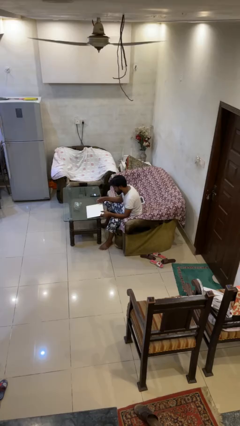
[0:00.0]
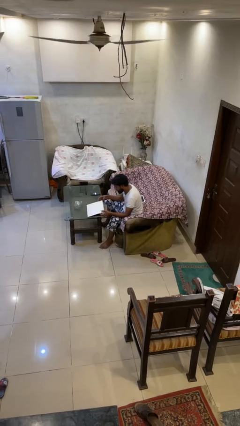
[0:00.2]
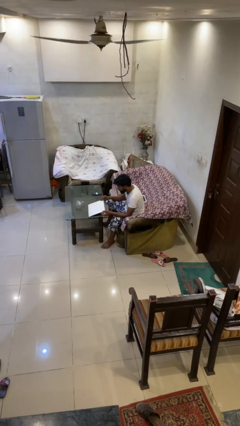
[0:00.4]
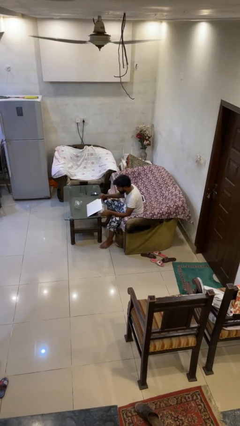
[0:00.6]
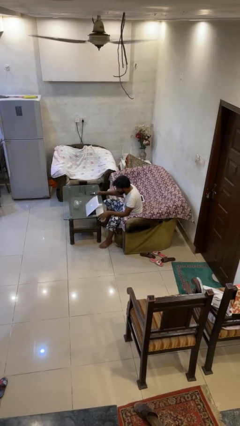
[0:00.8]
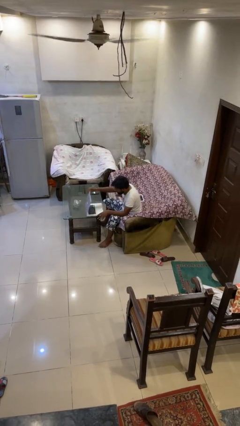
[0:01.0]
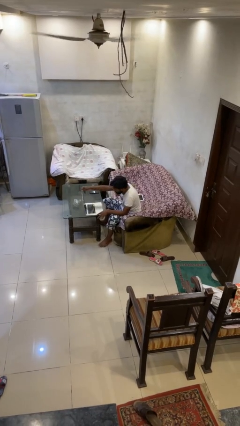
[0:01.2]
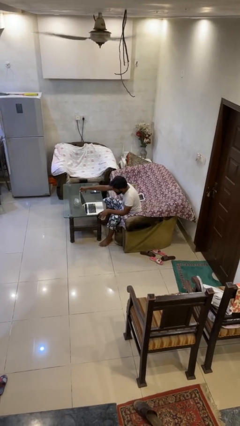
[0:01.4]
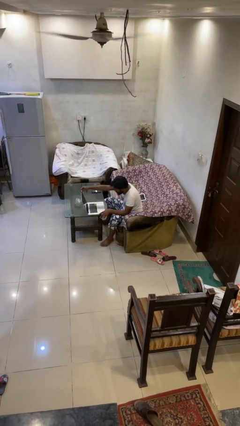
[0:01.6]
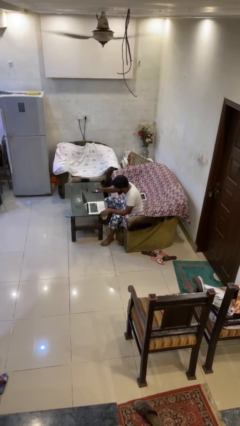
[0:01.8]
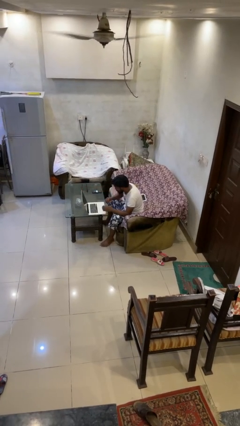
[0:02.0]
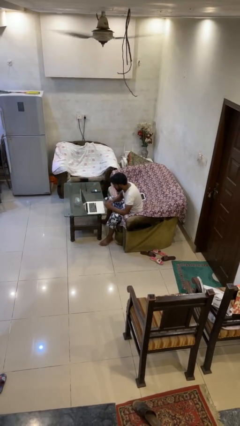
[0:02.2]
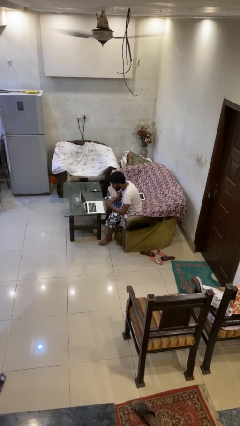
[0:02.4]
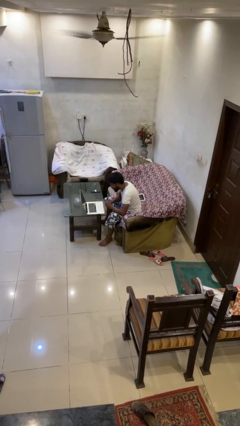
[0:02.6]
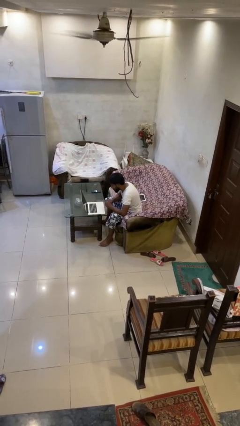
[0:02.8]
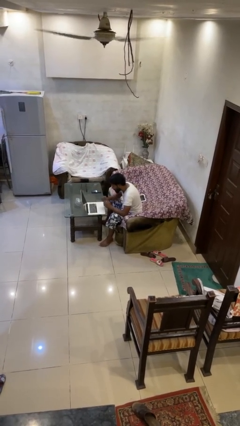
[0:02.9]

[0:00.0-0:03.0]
person opens laptop

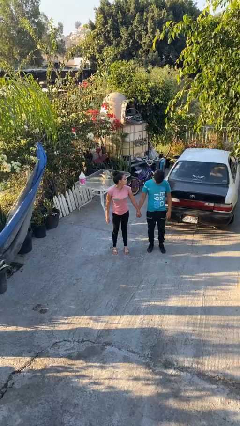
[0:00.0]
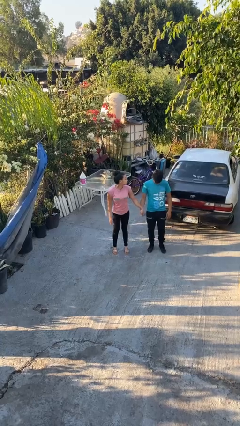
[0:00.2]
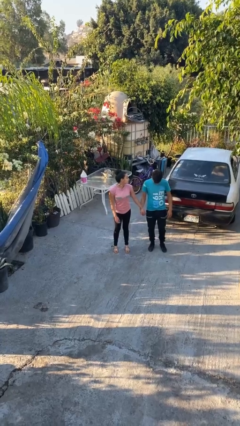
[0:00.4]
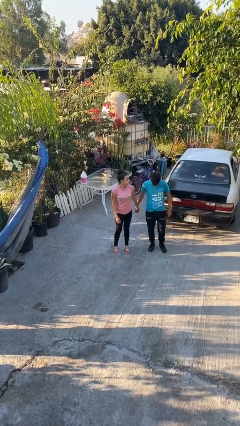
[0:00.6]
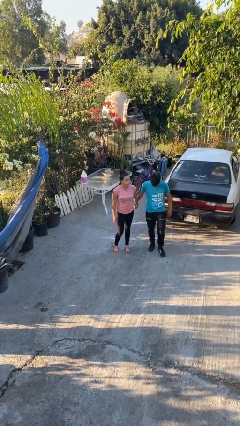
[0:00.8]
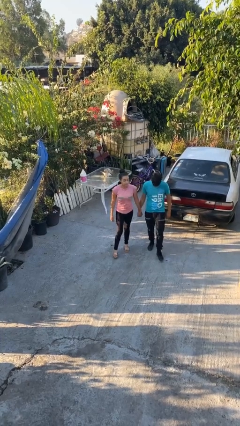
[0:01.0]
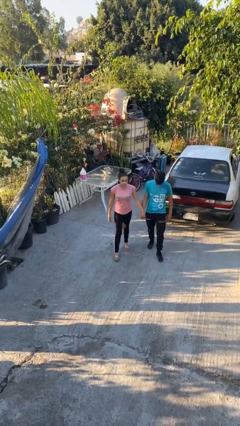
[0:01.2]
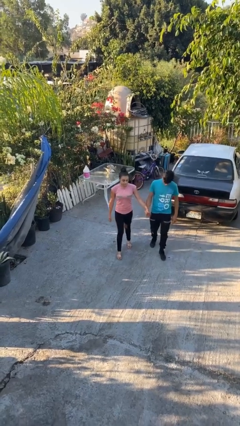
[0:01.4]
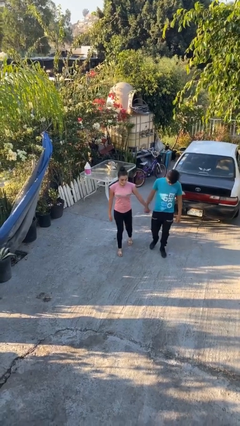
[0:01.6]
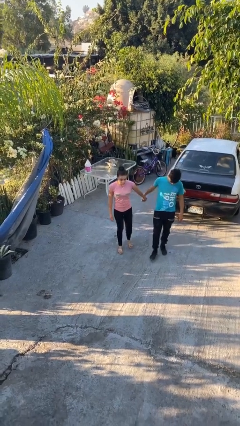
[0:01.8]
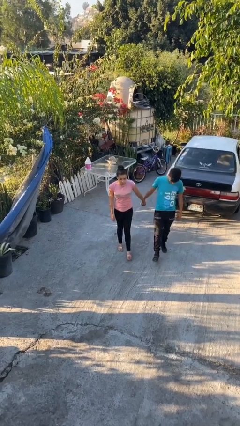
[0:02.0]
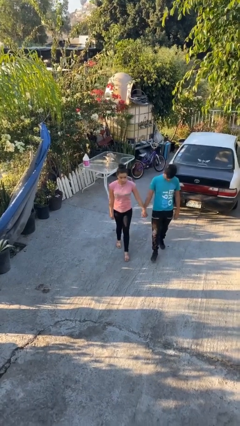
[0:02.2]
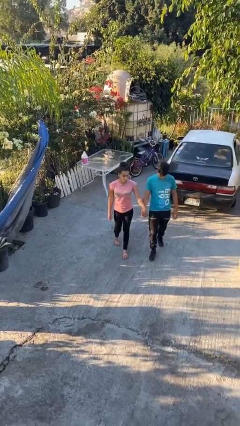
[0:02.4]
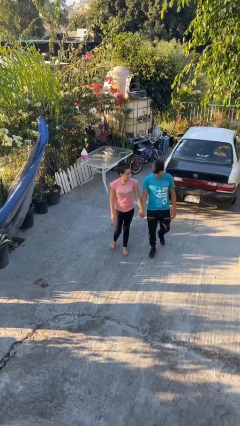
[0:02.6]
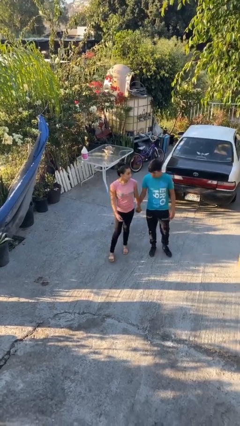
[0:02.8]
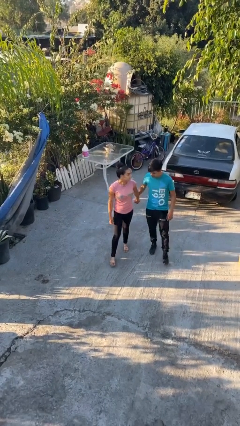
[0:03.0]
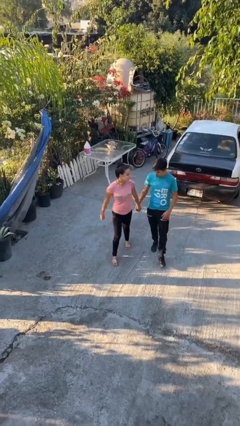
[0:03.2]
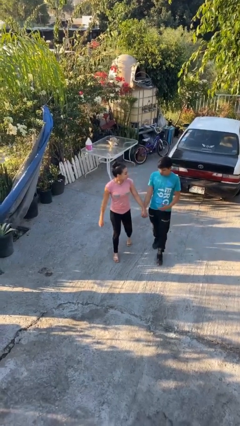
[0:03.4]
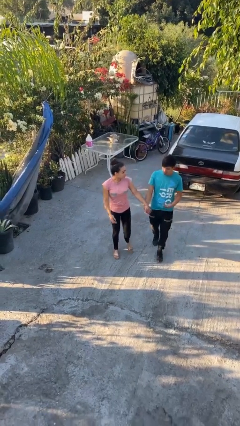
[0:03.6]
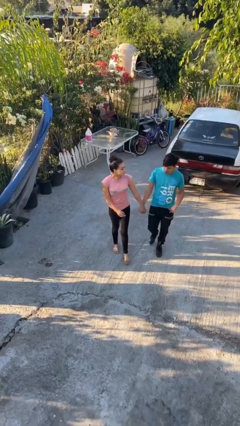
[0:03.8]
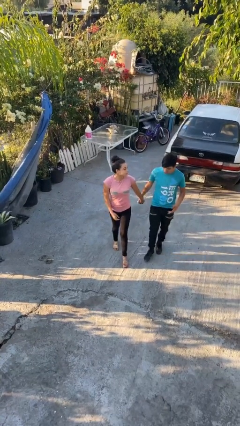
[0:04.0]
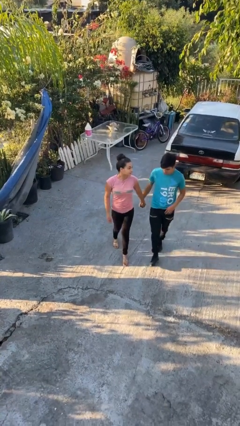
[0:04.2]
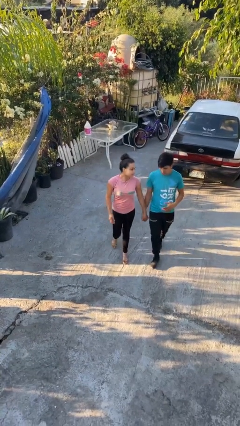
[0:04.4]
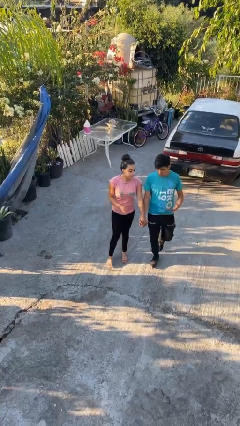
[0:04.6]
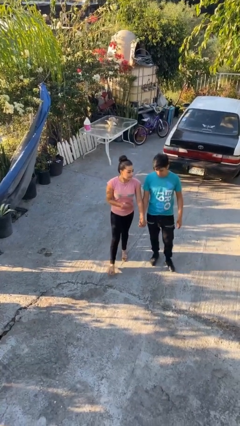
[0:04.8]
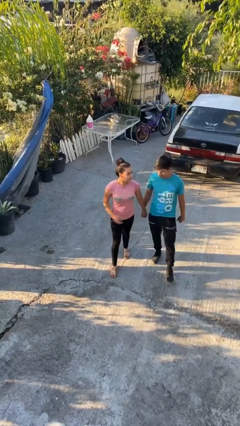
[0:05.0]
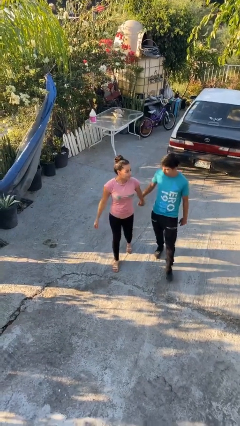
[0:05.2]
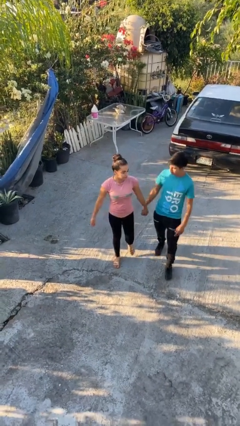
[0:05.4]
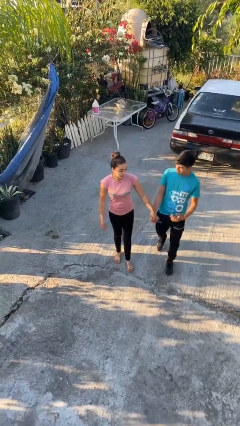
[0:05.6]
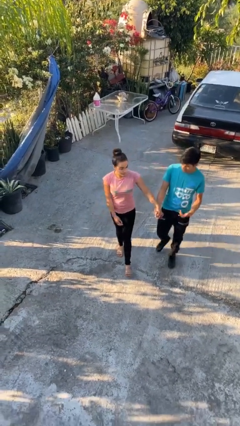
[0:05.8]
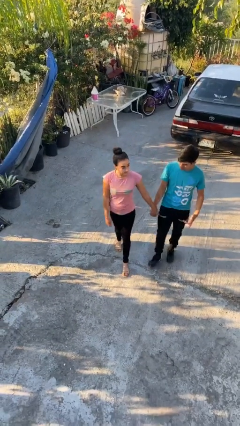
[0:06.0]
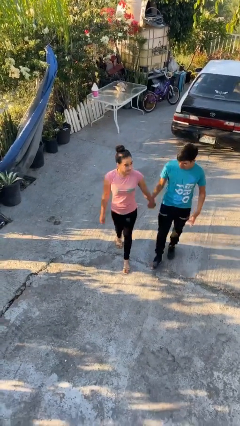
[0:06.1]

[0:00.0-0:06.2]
person holds hand

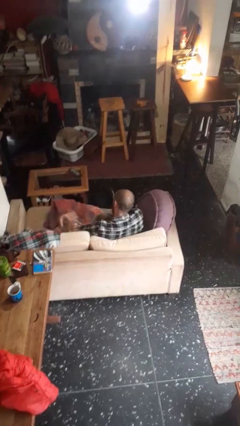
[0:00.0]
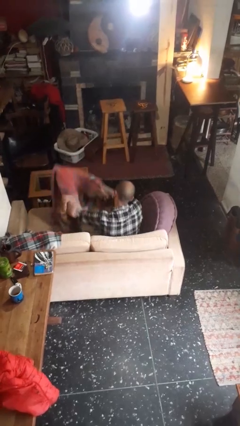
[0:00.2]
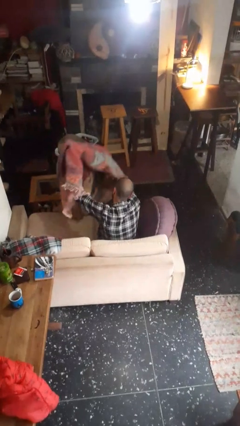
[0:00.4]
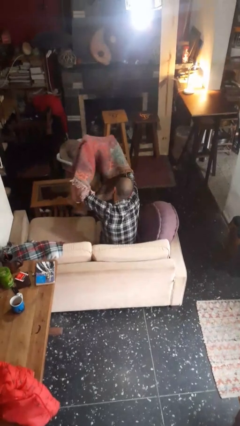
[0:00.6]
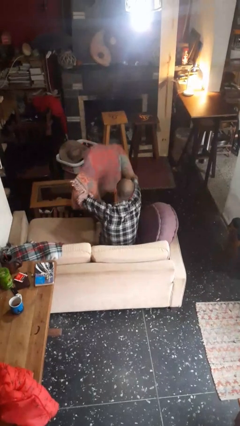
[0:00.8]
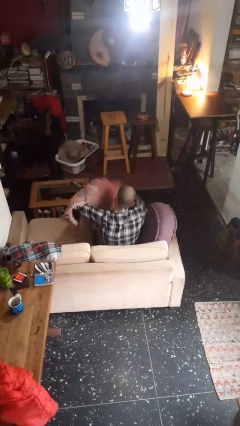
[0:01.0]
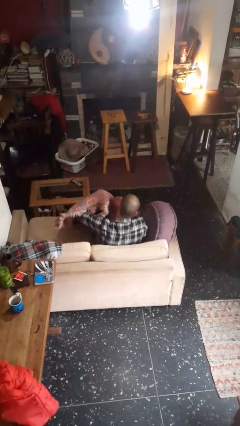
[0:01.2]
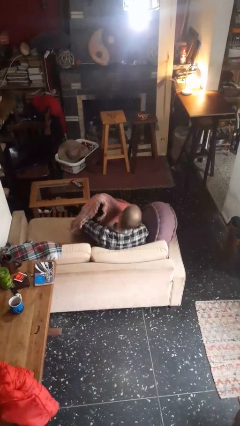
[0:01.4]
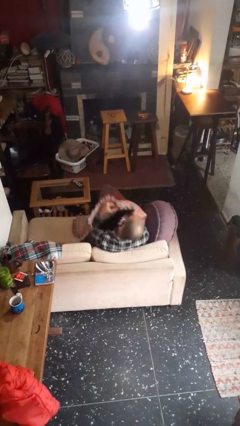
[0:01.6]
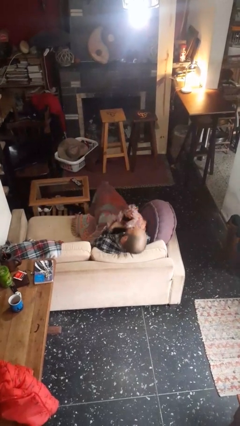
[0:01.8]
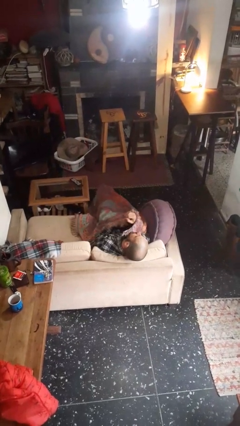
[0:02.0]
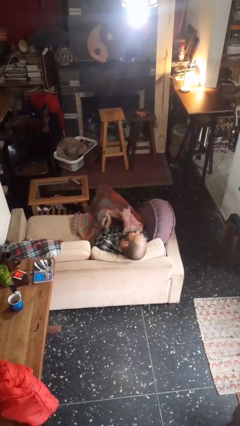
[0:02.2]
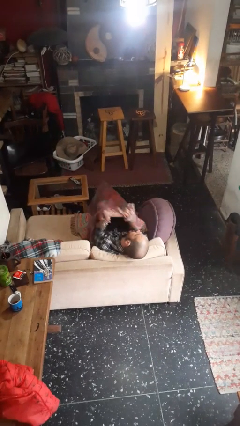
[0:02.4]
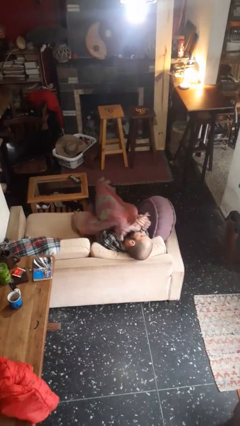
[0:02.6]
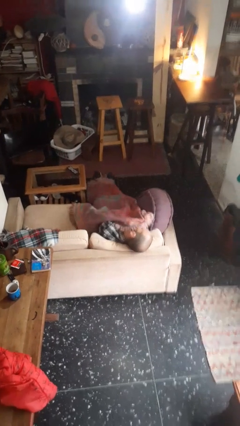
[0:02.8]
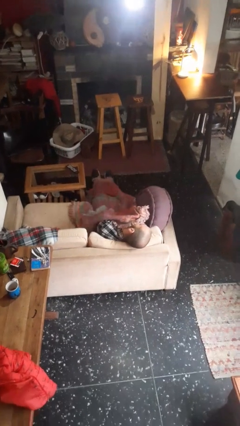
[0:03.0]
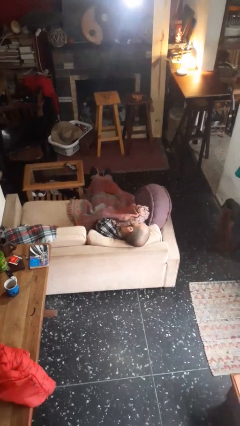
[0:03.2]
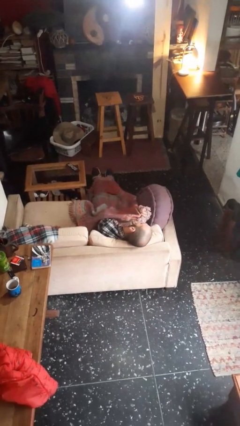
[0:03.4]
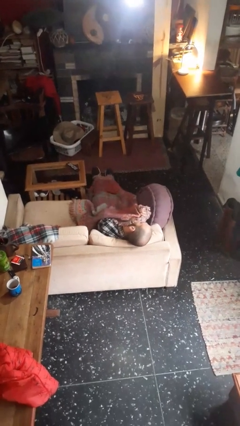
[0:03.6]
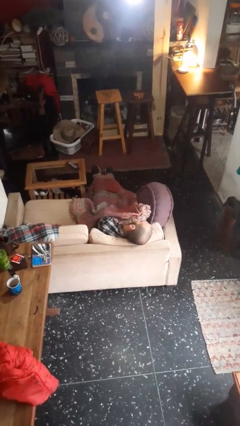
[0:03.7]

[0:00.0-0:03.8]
person covers with blanket

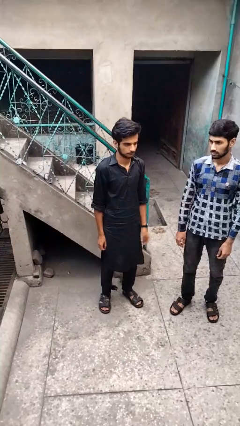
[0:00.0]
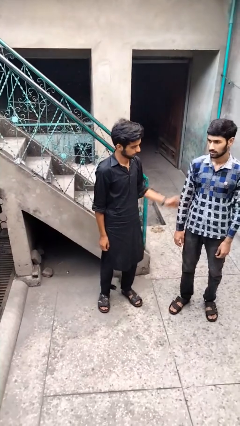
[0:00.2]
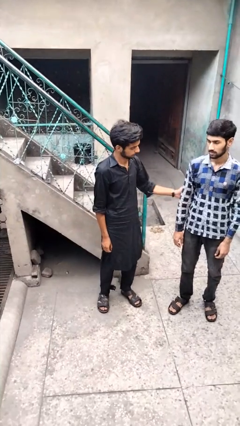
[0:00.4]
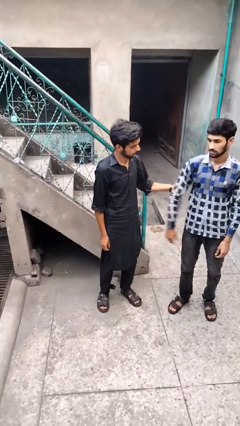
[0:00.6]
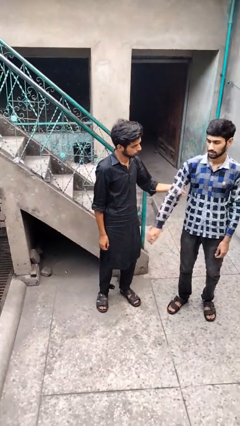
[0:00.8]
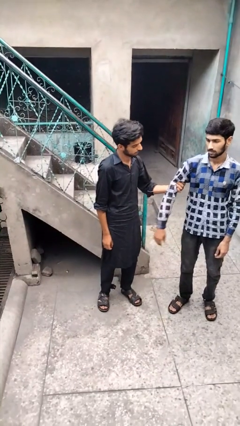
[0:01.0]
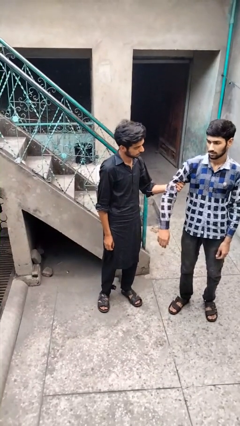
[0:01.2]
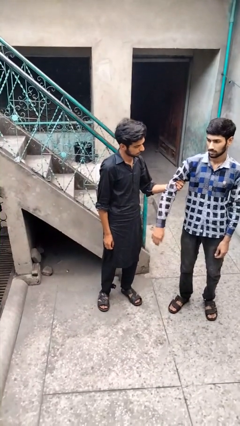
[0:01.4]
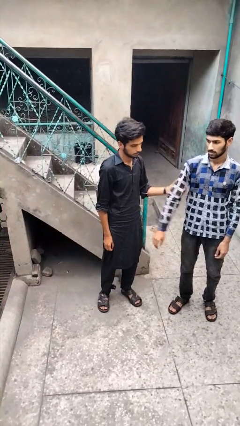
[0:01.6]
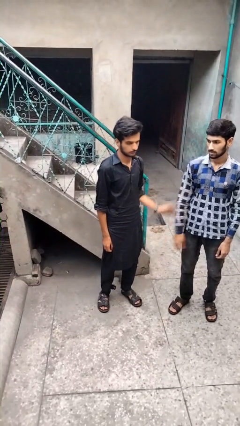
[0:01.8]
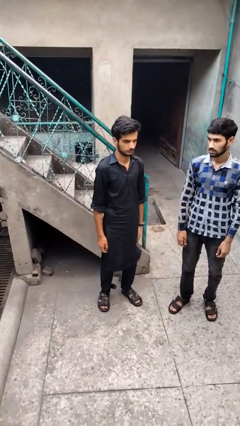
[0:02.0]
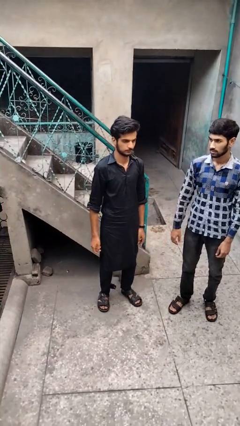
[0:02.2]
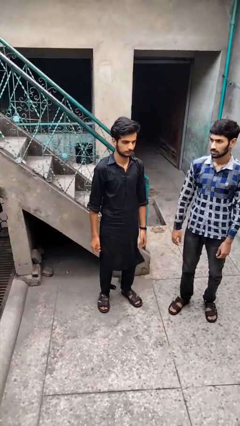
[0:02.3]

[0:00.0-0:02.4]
person grabs person by bicep

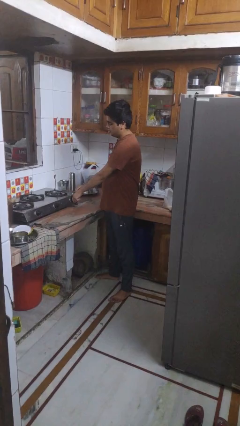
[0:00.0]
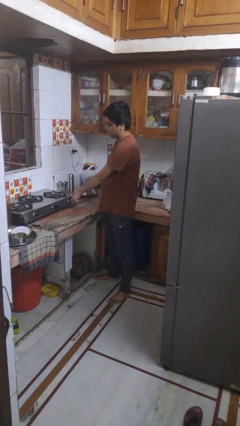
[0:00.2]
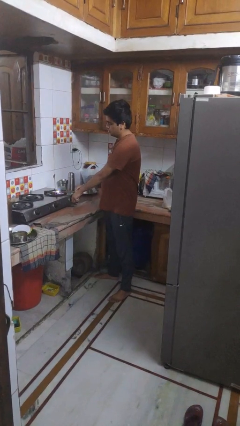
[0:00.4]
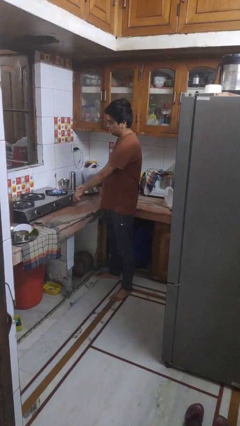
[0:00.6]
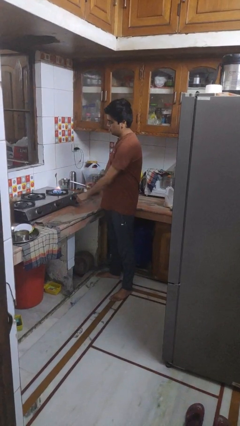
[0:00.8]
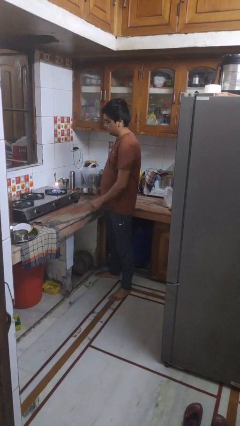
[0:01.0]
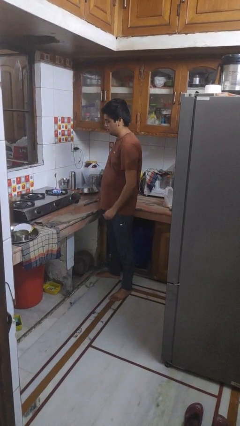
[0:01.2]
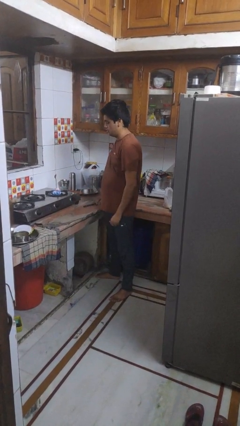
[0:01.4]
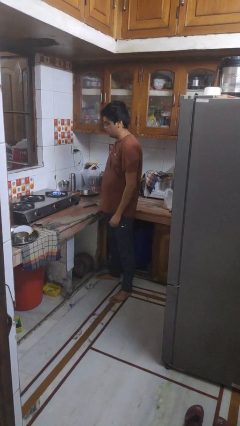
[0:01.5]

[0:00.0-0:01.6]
person turns on stovetop

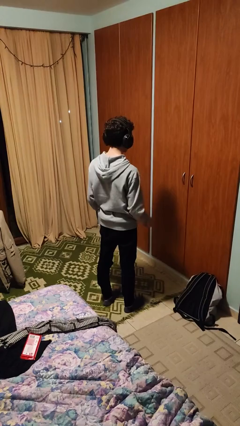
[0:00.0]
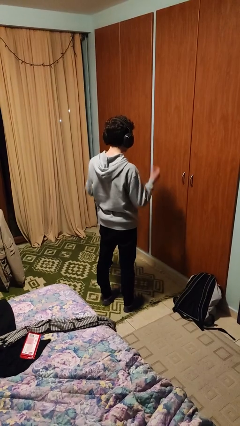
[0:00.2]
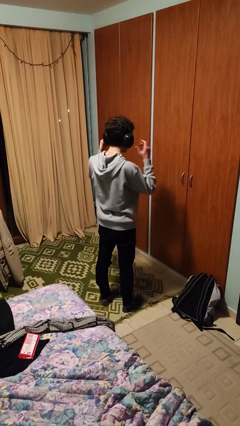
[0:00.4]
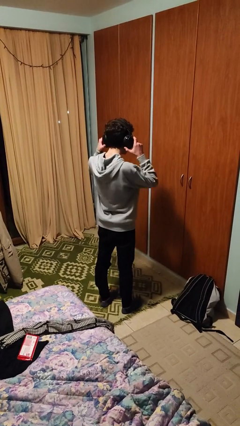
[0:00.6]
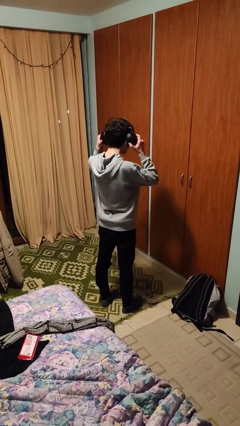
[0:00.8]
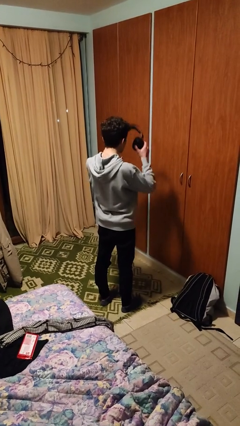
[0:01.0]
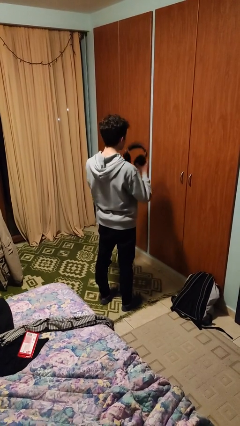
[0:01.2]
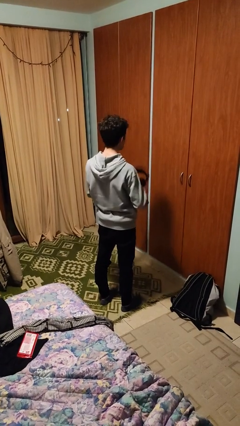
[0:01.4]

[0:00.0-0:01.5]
person takes off headphones
